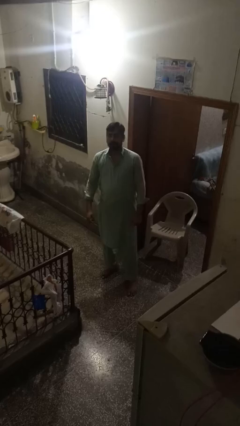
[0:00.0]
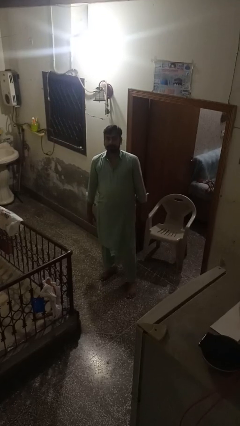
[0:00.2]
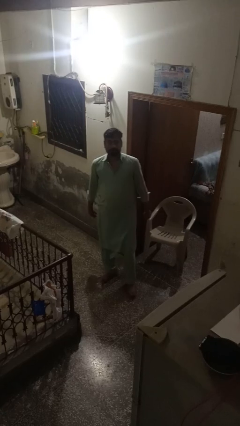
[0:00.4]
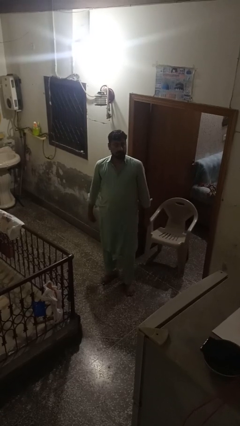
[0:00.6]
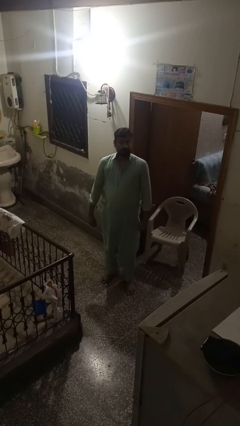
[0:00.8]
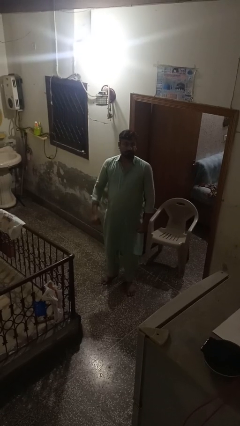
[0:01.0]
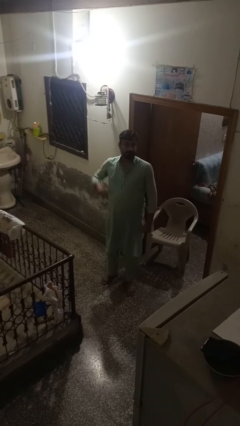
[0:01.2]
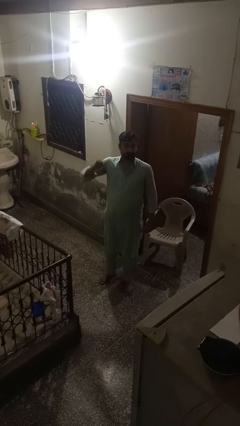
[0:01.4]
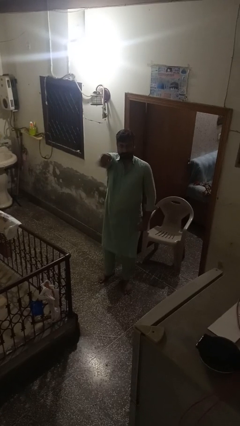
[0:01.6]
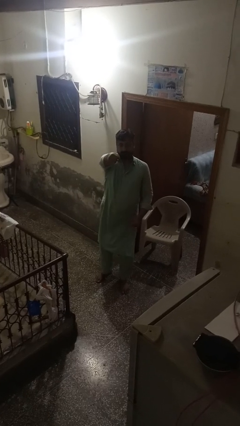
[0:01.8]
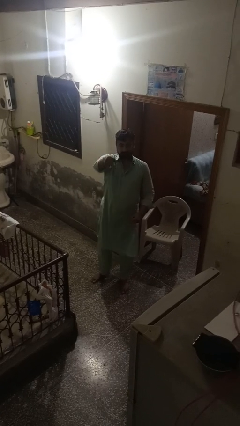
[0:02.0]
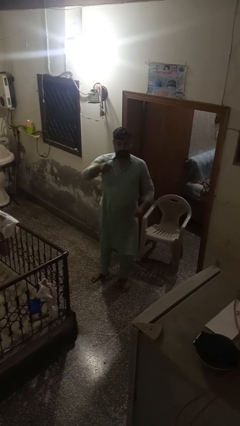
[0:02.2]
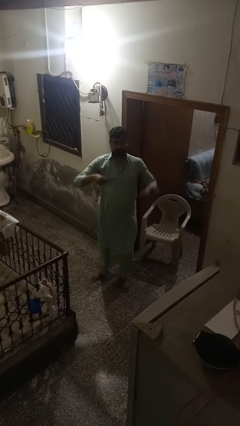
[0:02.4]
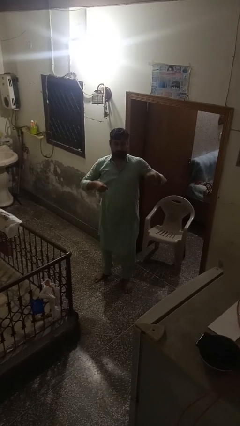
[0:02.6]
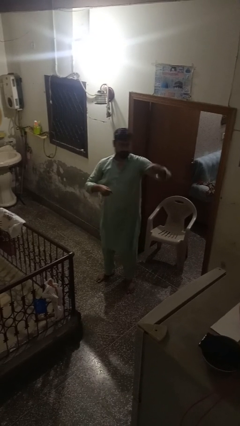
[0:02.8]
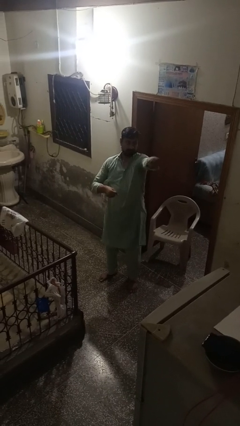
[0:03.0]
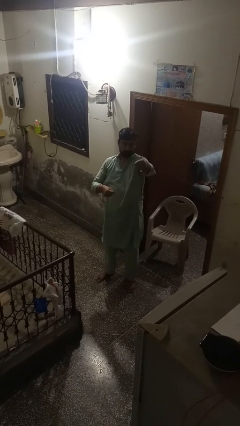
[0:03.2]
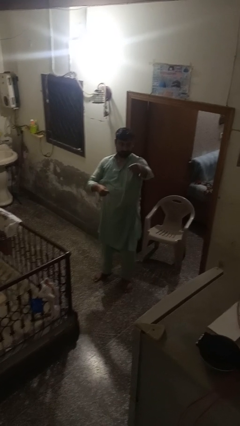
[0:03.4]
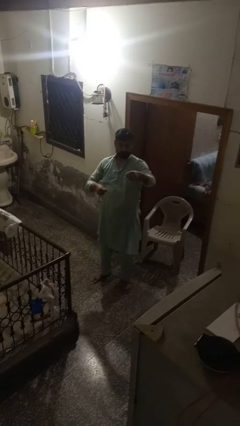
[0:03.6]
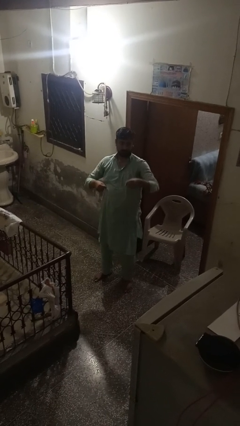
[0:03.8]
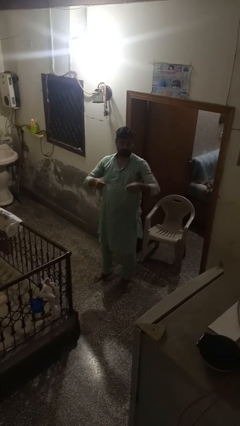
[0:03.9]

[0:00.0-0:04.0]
person punches

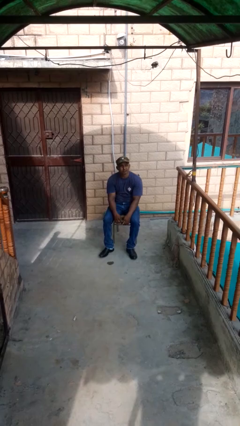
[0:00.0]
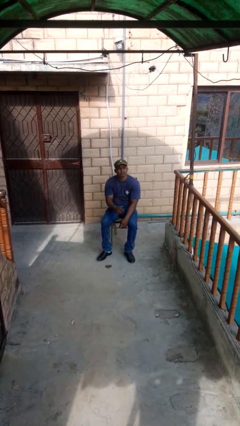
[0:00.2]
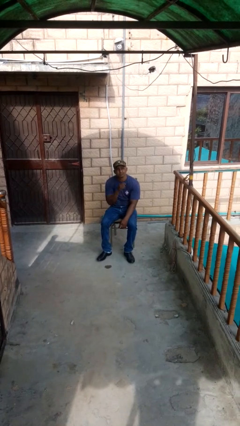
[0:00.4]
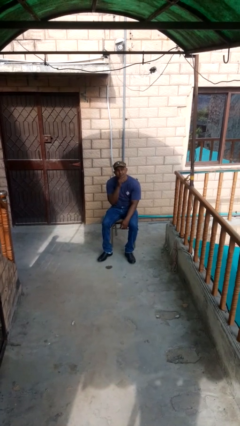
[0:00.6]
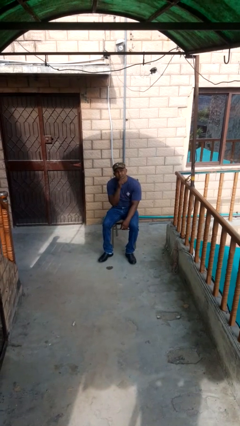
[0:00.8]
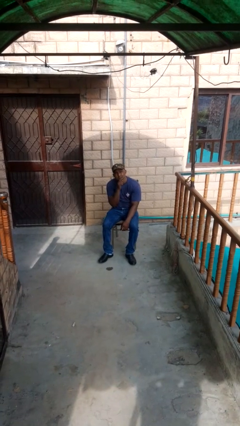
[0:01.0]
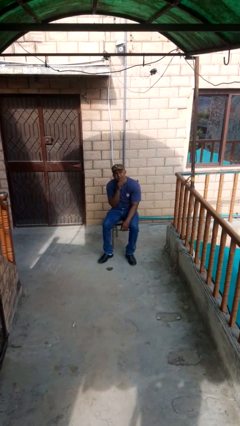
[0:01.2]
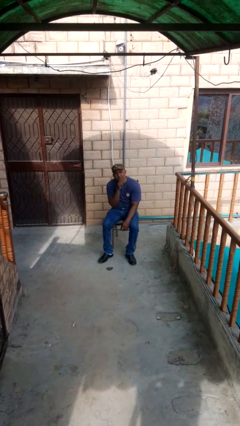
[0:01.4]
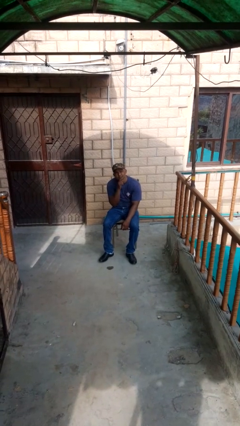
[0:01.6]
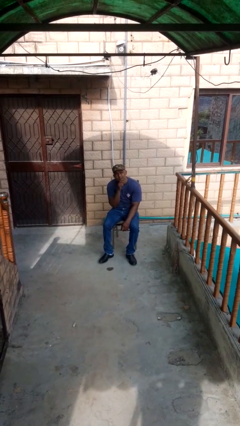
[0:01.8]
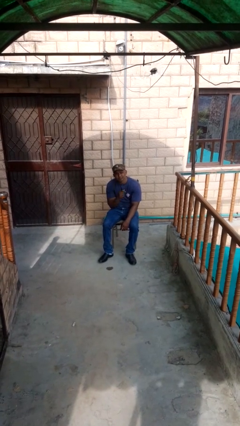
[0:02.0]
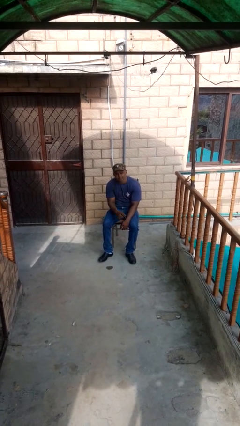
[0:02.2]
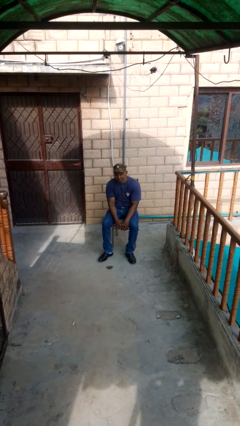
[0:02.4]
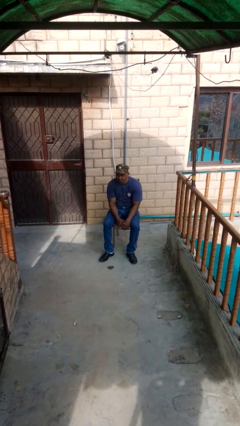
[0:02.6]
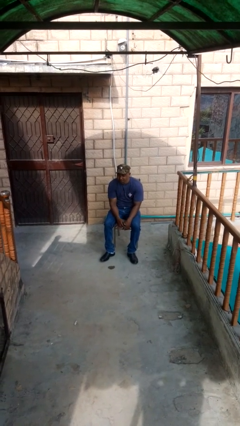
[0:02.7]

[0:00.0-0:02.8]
person strokes chin

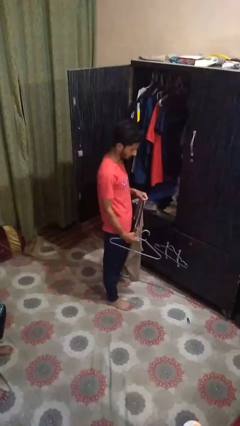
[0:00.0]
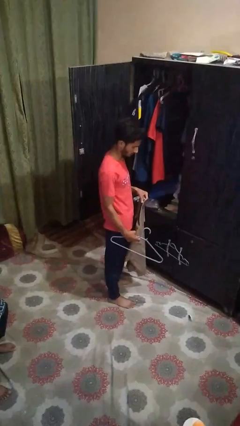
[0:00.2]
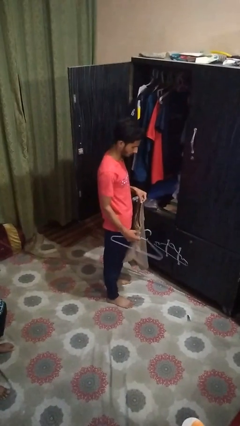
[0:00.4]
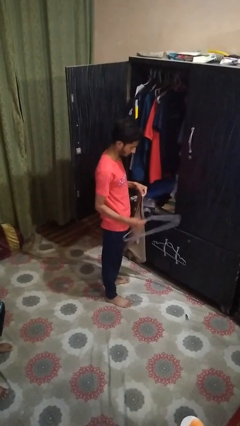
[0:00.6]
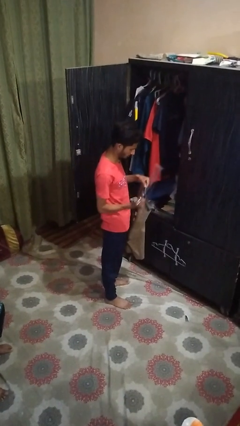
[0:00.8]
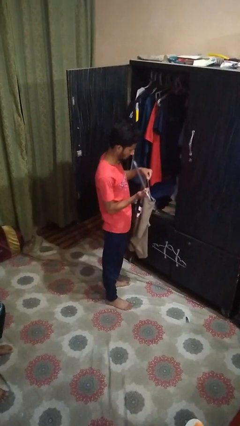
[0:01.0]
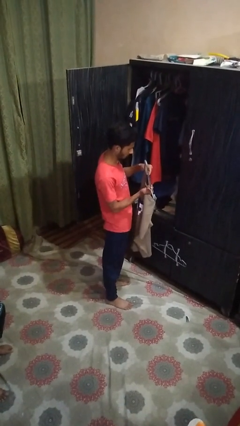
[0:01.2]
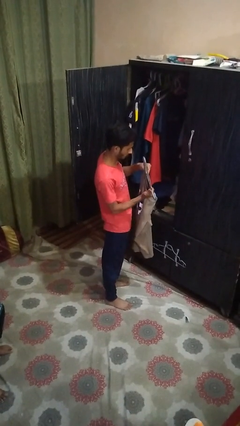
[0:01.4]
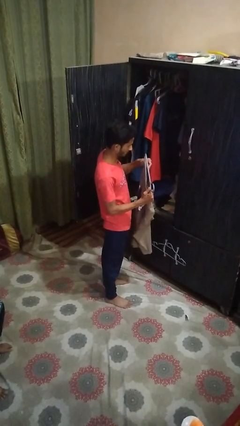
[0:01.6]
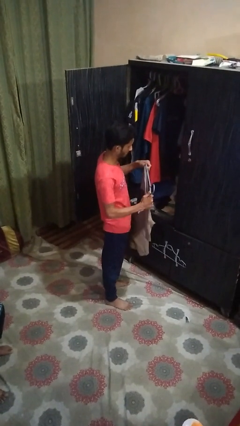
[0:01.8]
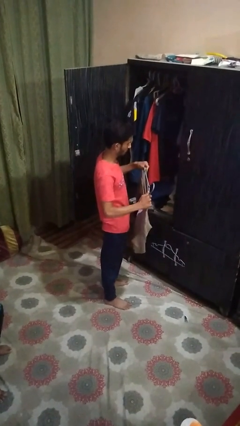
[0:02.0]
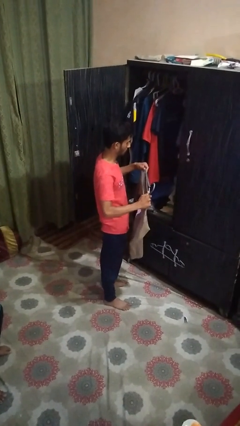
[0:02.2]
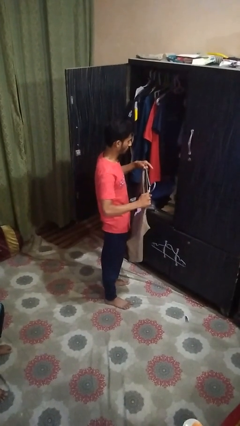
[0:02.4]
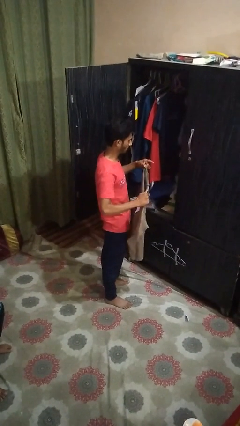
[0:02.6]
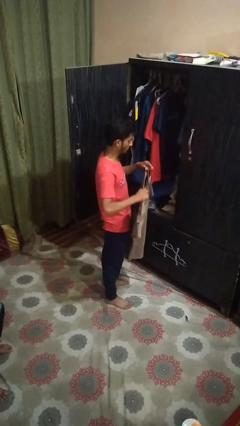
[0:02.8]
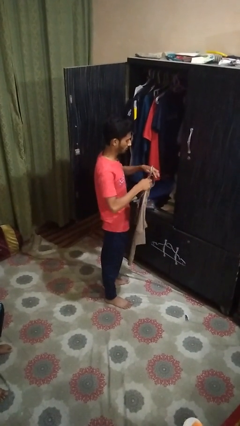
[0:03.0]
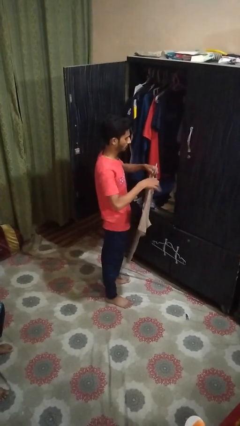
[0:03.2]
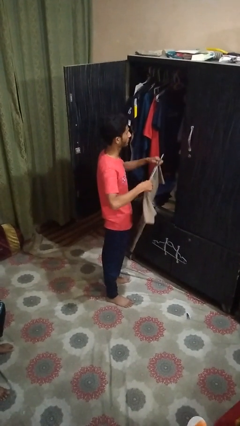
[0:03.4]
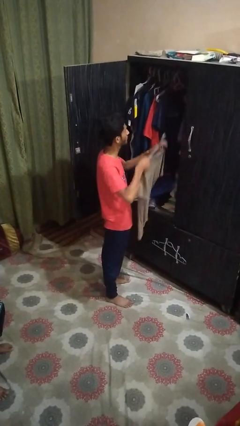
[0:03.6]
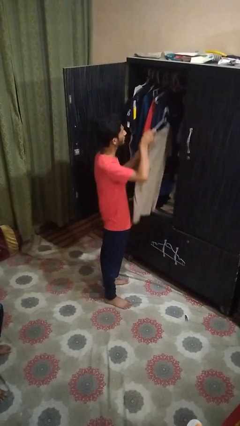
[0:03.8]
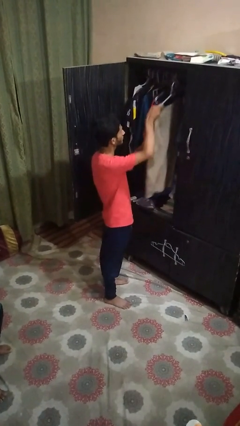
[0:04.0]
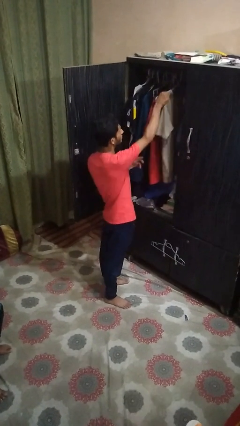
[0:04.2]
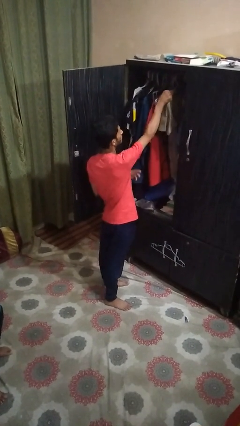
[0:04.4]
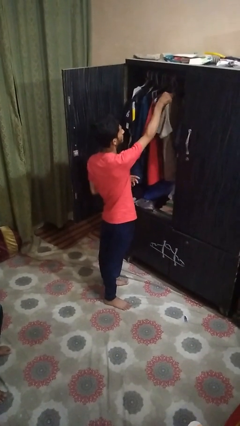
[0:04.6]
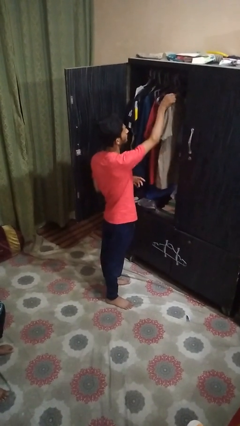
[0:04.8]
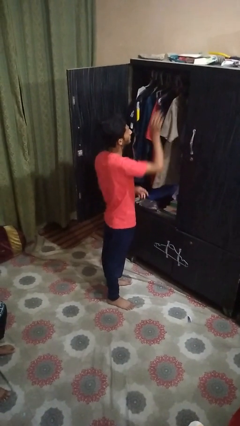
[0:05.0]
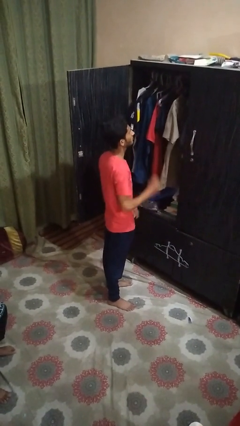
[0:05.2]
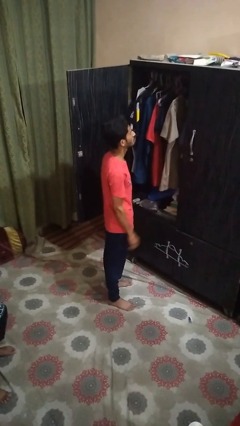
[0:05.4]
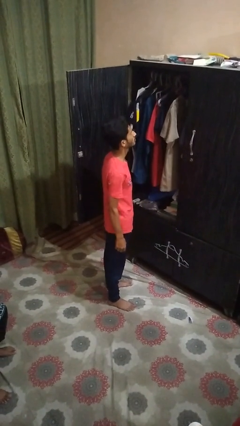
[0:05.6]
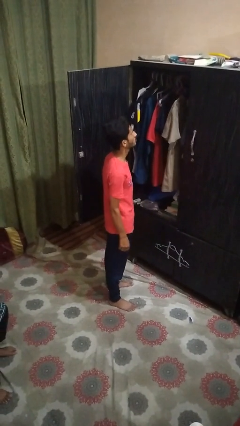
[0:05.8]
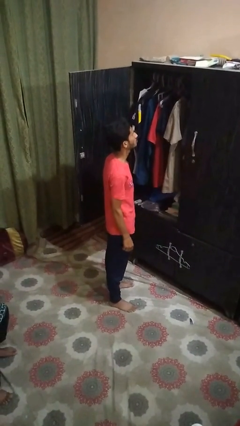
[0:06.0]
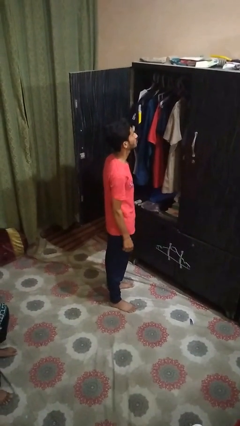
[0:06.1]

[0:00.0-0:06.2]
person puts clothes into closet

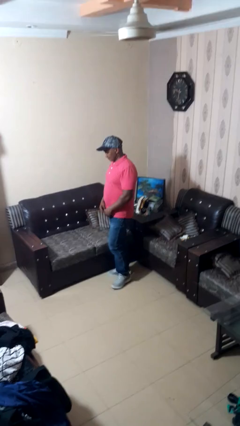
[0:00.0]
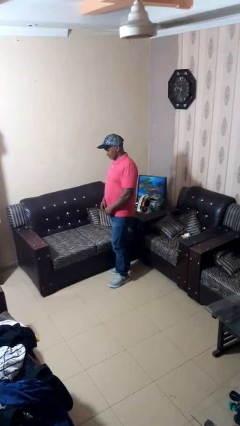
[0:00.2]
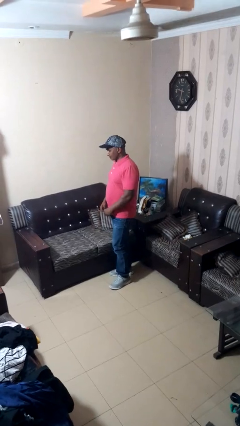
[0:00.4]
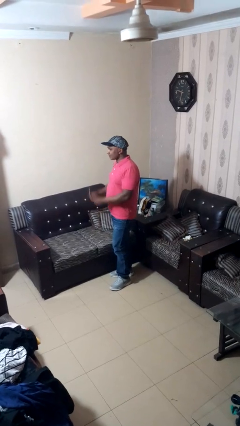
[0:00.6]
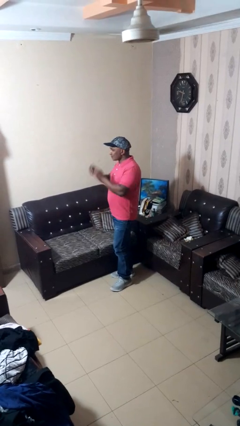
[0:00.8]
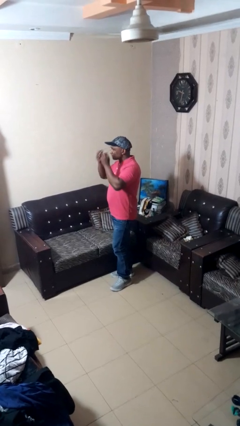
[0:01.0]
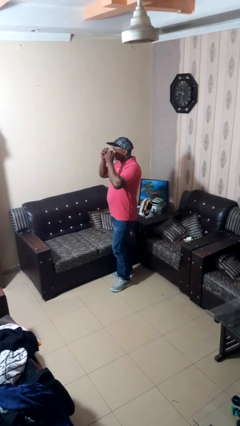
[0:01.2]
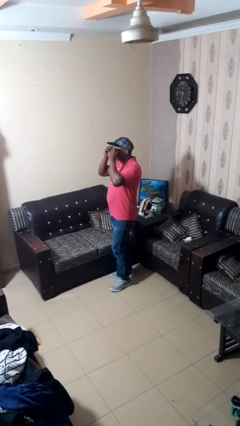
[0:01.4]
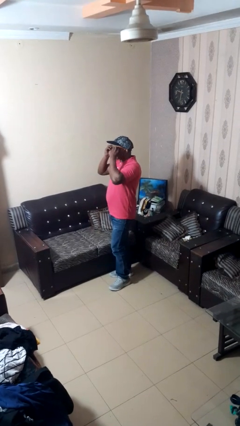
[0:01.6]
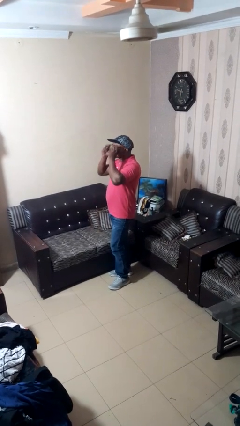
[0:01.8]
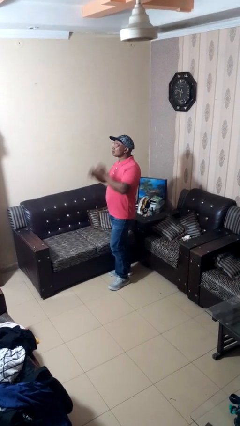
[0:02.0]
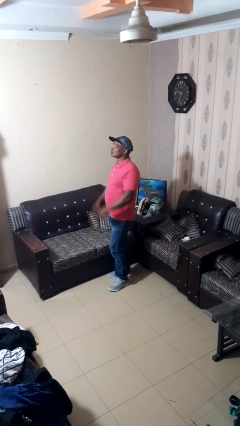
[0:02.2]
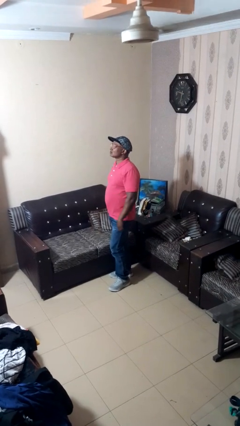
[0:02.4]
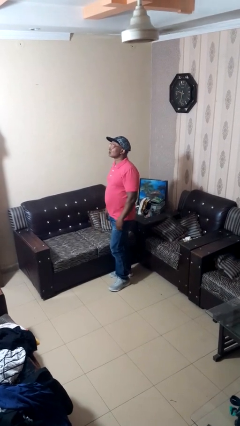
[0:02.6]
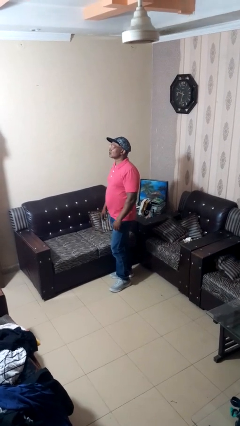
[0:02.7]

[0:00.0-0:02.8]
person puts on glasses

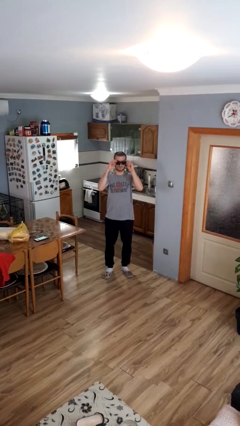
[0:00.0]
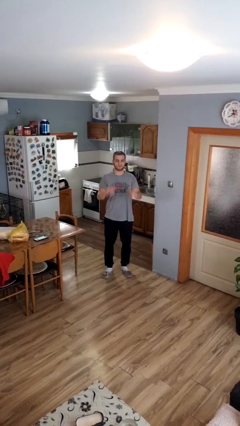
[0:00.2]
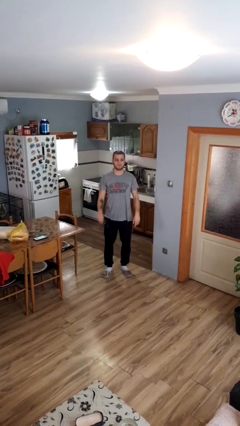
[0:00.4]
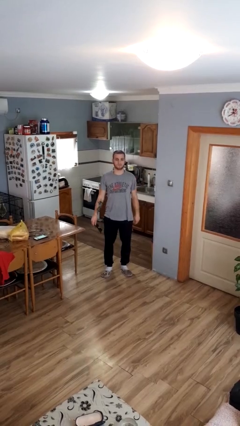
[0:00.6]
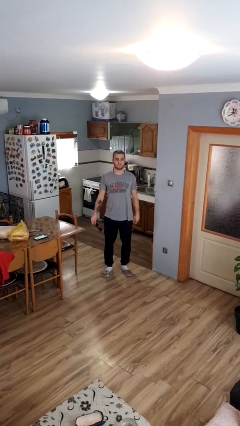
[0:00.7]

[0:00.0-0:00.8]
person takes off sunglasses

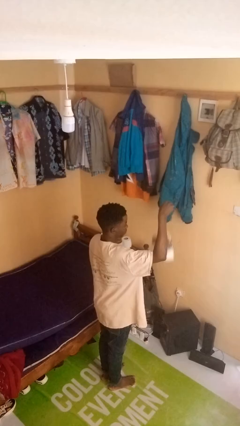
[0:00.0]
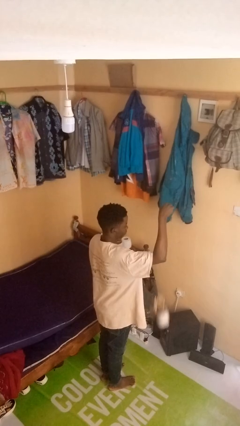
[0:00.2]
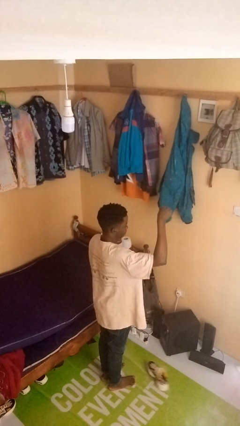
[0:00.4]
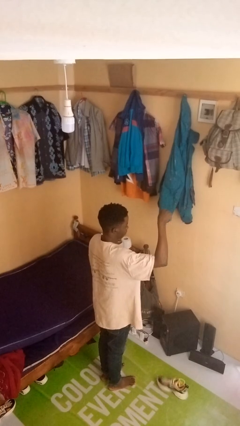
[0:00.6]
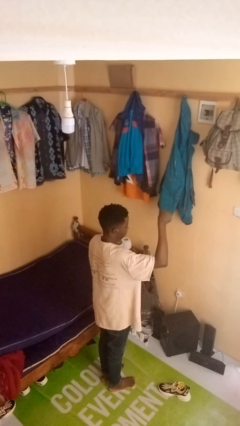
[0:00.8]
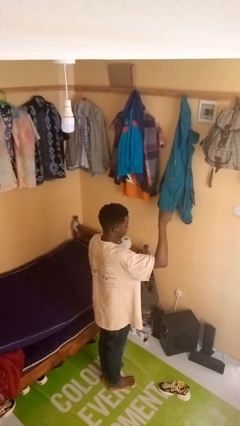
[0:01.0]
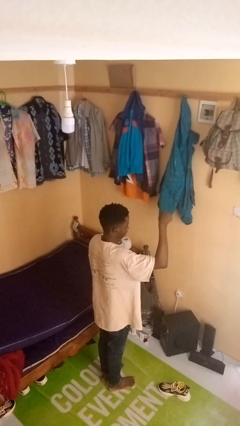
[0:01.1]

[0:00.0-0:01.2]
person drops object
